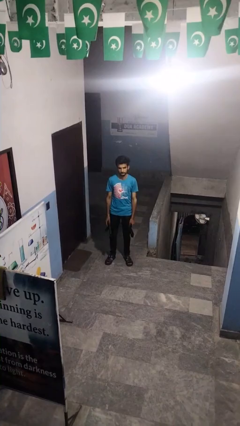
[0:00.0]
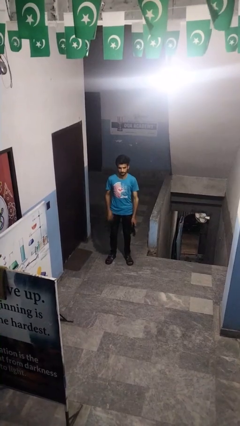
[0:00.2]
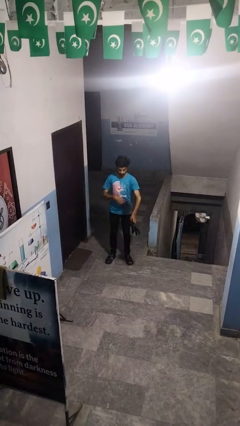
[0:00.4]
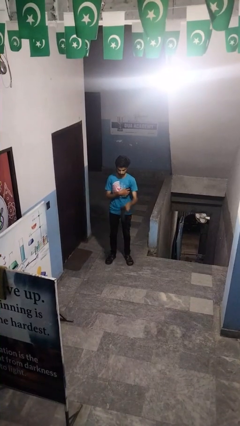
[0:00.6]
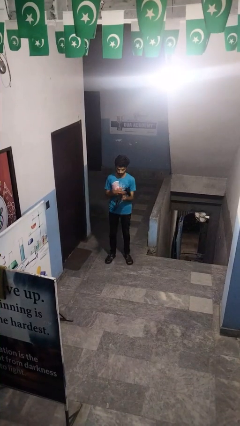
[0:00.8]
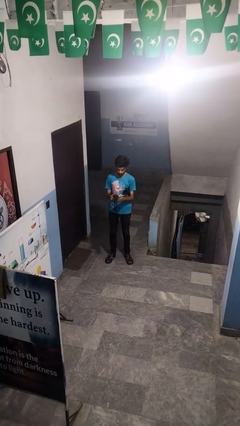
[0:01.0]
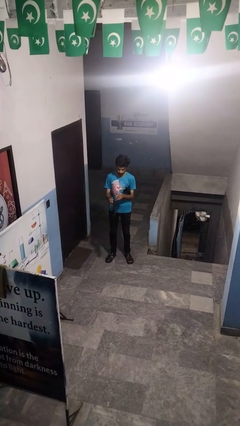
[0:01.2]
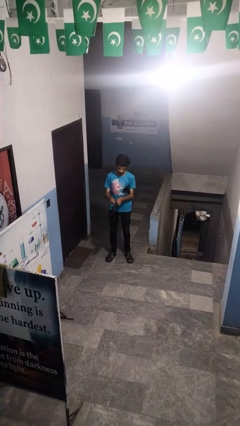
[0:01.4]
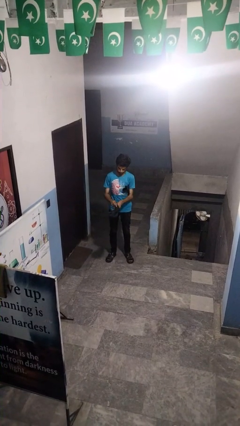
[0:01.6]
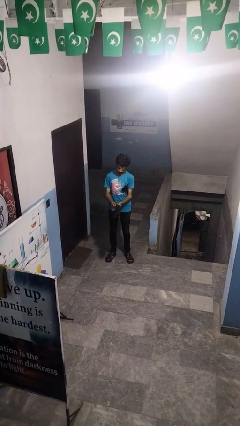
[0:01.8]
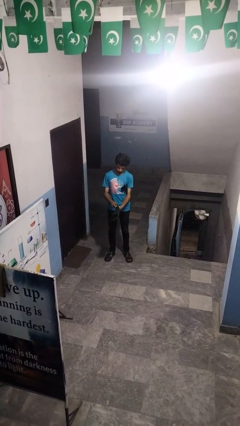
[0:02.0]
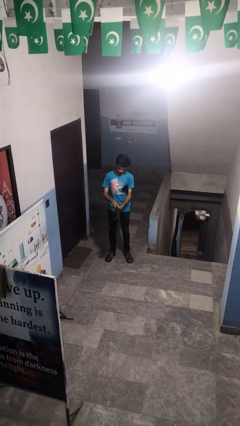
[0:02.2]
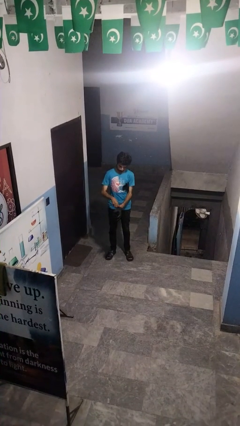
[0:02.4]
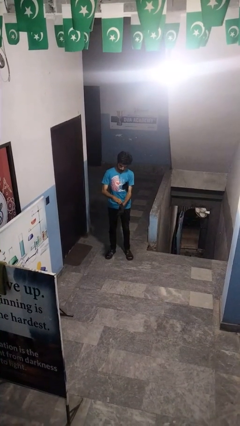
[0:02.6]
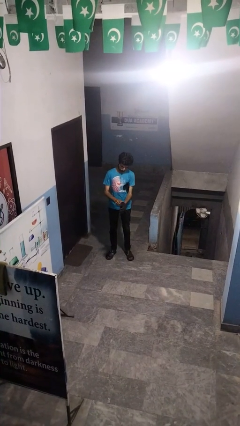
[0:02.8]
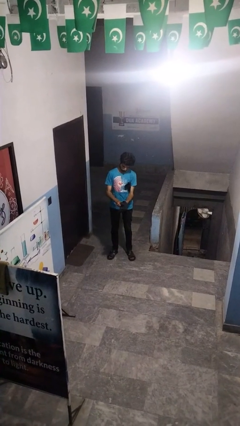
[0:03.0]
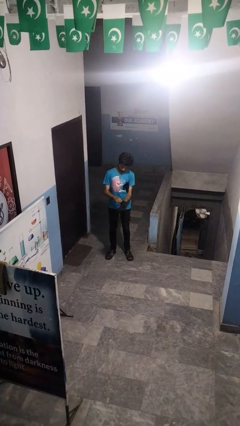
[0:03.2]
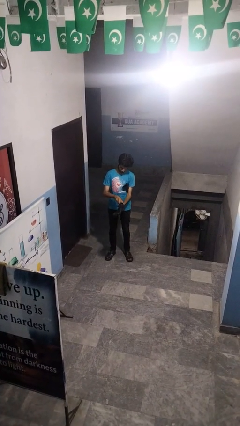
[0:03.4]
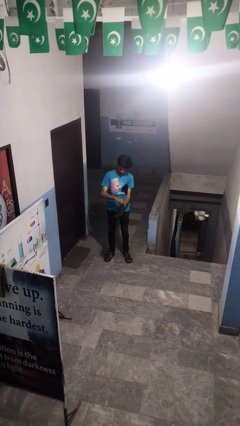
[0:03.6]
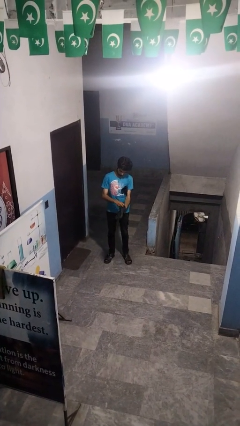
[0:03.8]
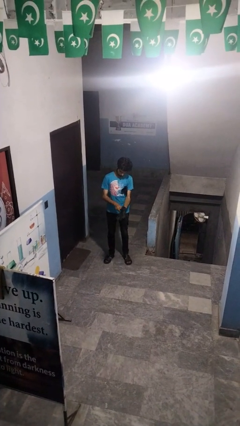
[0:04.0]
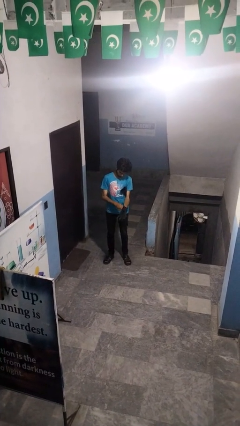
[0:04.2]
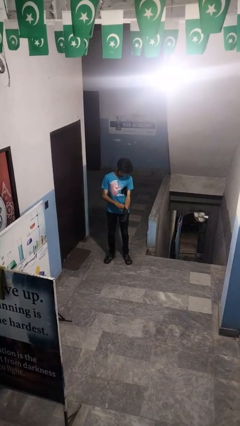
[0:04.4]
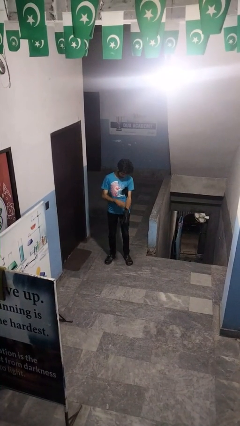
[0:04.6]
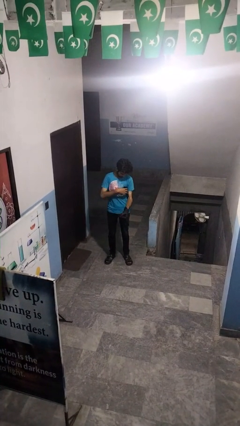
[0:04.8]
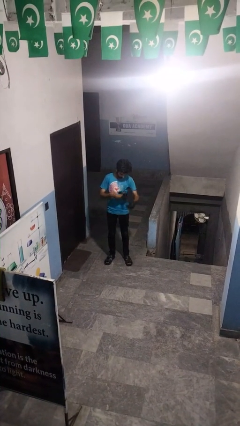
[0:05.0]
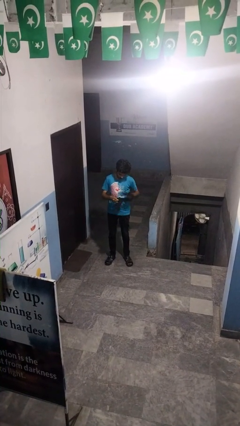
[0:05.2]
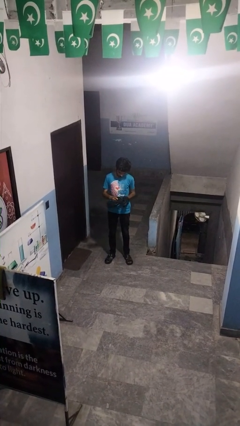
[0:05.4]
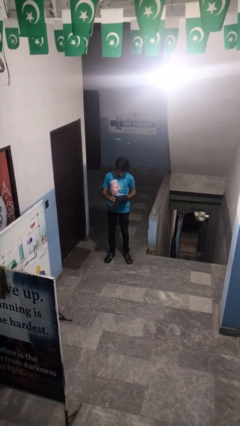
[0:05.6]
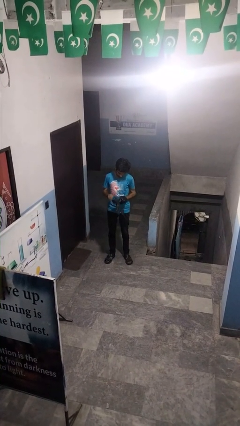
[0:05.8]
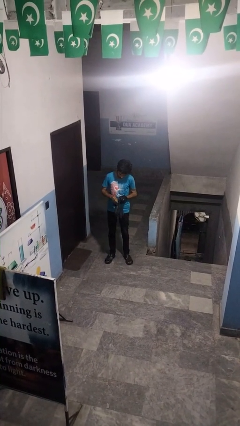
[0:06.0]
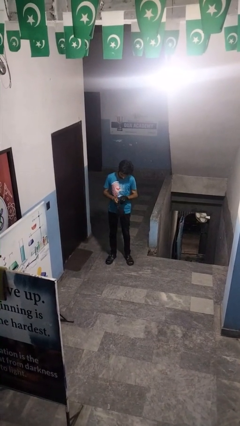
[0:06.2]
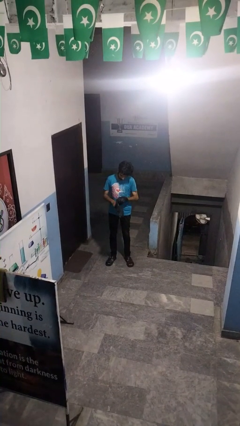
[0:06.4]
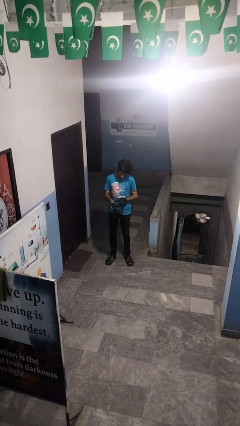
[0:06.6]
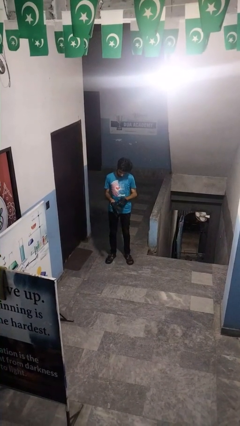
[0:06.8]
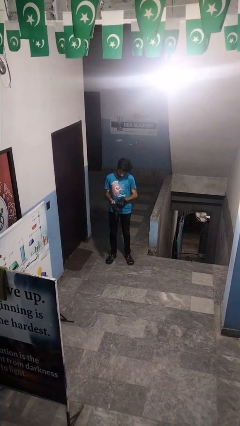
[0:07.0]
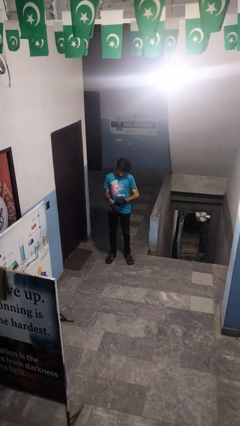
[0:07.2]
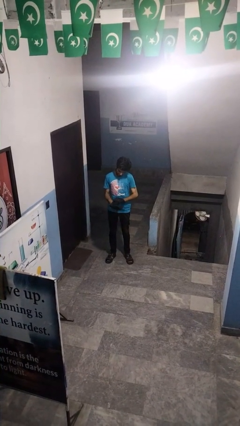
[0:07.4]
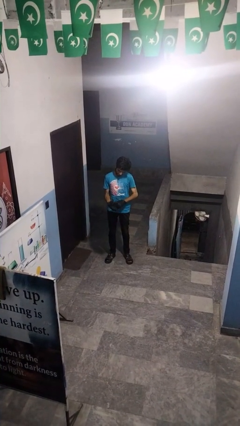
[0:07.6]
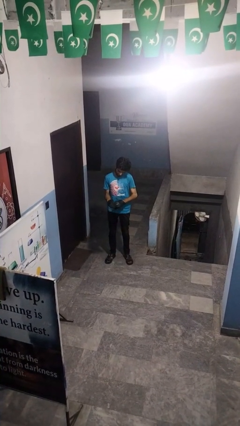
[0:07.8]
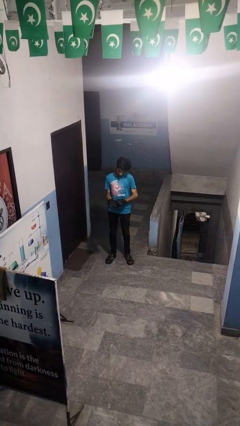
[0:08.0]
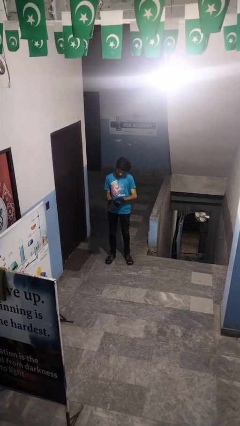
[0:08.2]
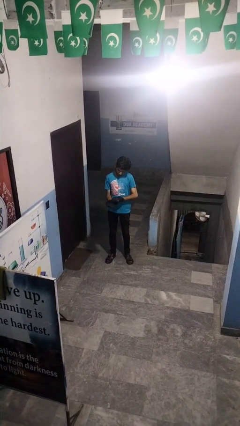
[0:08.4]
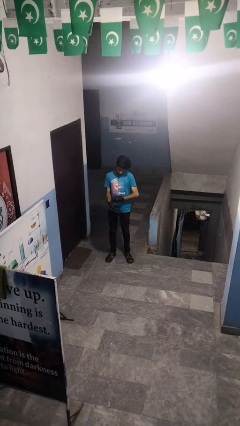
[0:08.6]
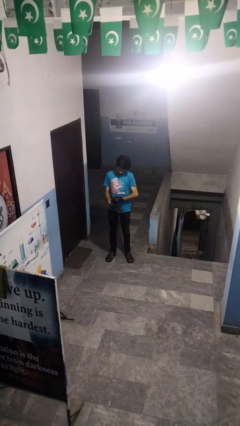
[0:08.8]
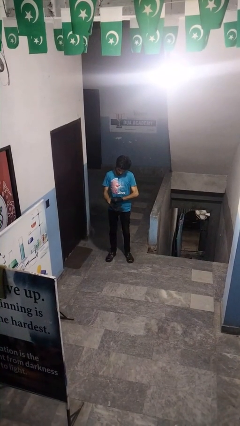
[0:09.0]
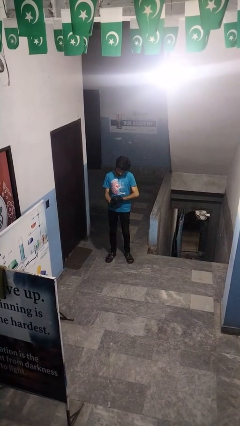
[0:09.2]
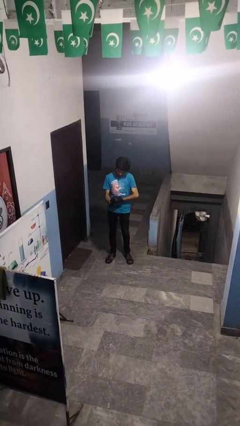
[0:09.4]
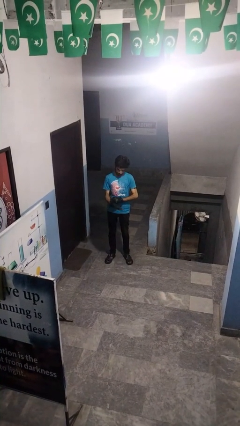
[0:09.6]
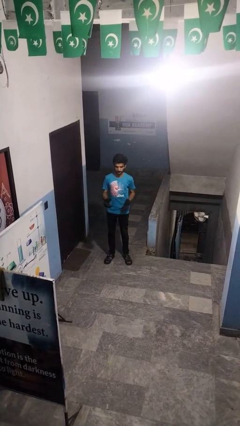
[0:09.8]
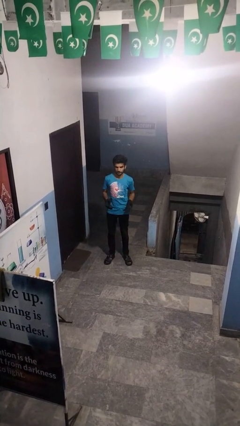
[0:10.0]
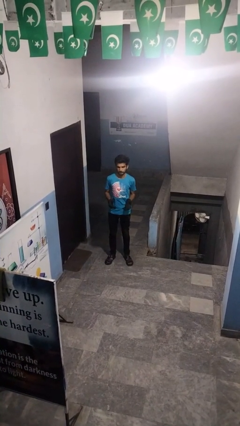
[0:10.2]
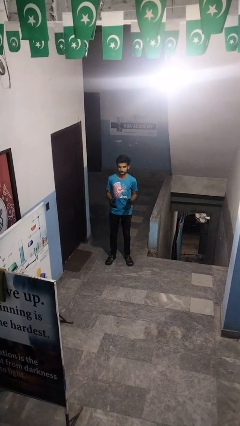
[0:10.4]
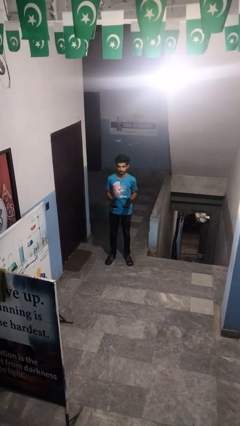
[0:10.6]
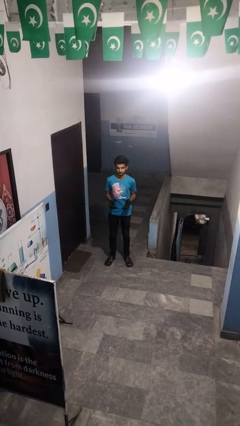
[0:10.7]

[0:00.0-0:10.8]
person puts on gloves

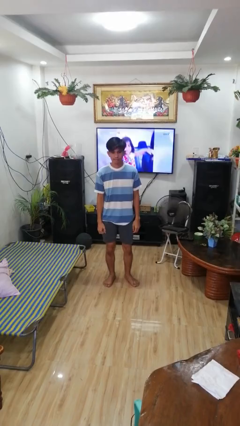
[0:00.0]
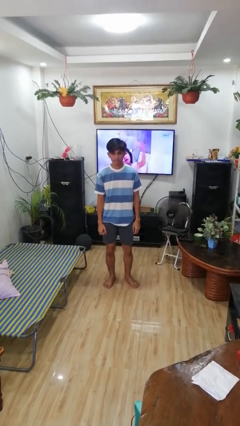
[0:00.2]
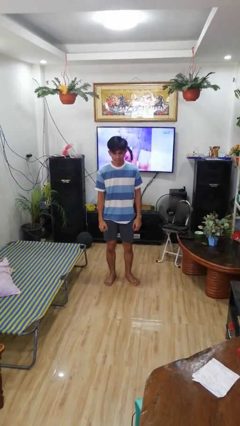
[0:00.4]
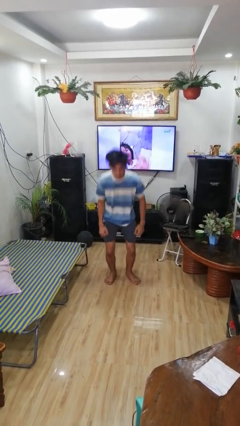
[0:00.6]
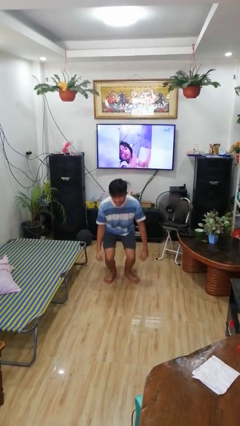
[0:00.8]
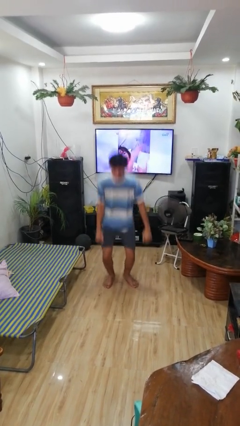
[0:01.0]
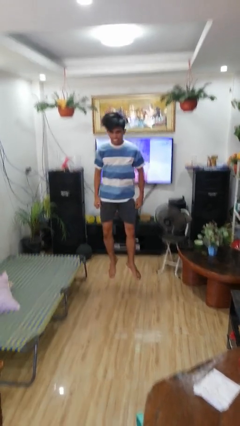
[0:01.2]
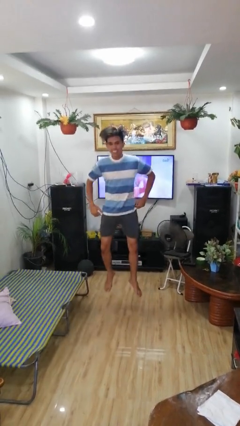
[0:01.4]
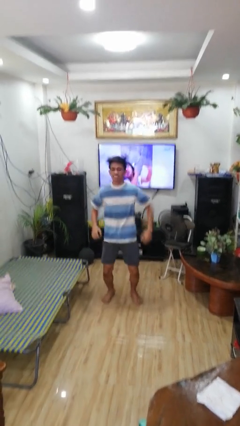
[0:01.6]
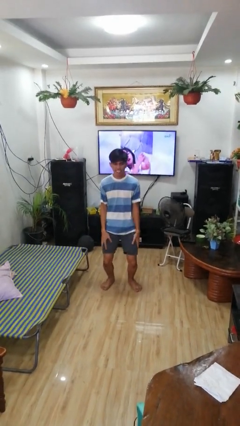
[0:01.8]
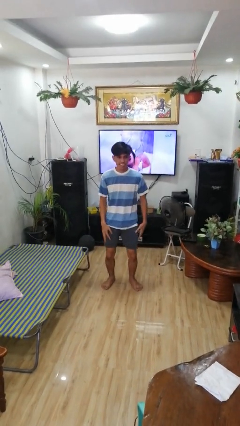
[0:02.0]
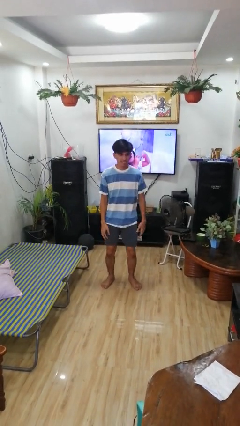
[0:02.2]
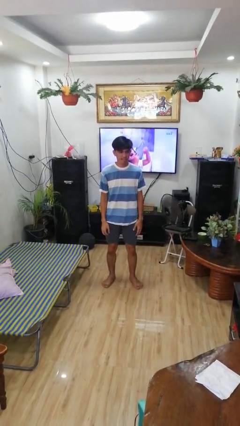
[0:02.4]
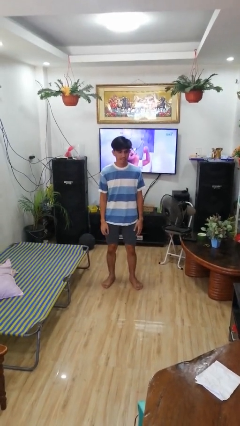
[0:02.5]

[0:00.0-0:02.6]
person jumps

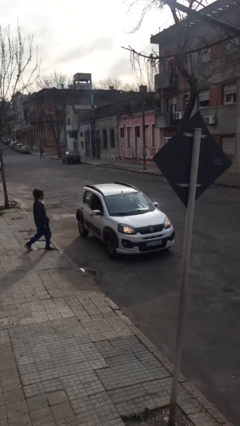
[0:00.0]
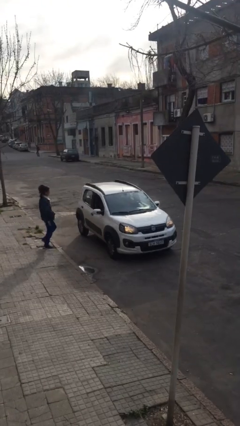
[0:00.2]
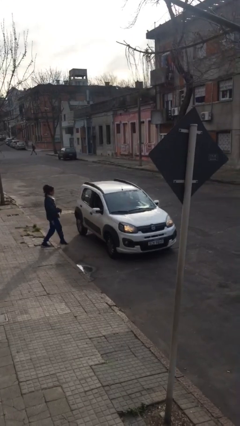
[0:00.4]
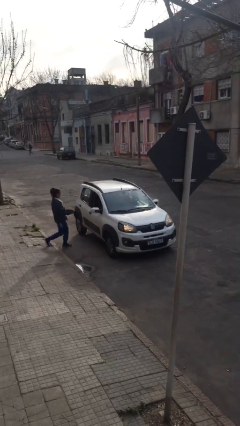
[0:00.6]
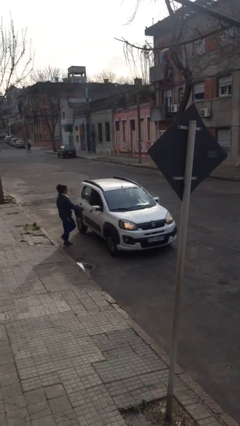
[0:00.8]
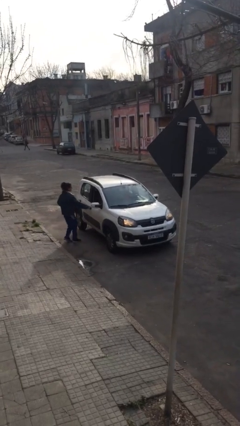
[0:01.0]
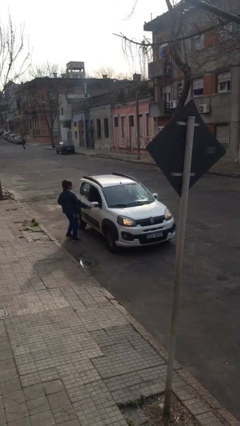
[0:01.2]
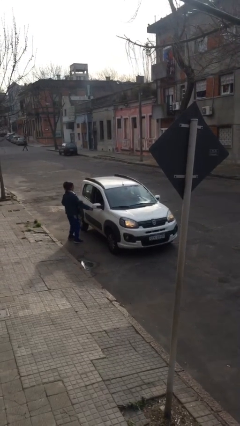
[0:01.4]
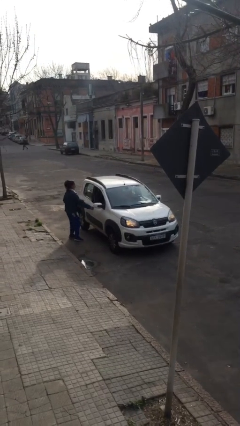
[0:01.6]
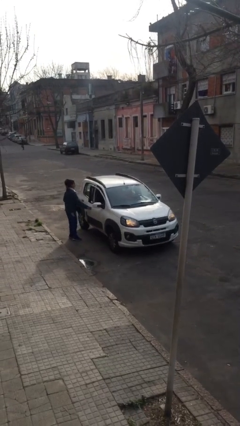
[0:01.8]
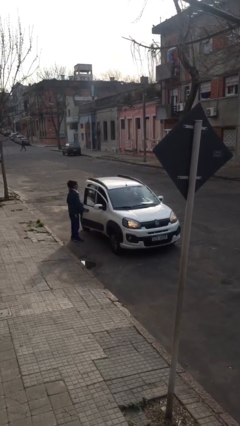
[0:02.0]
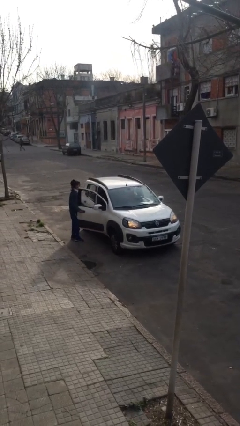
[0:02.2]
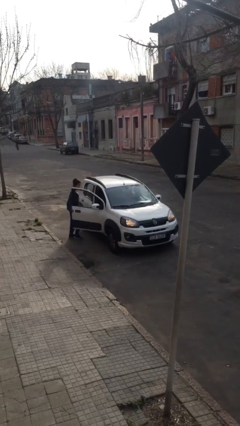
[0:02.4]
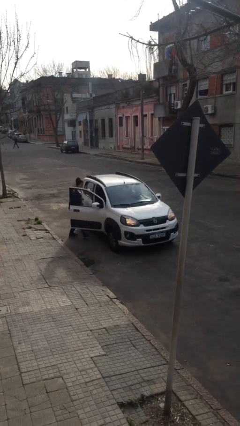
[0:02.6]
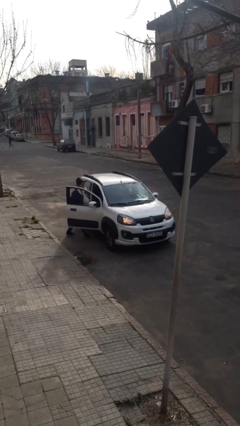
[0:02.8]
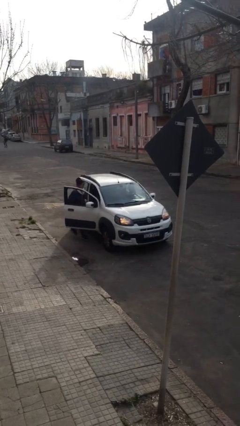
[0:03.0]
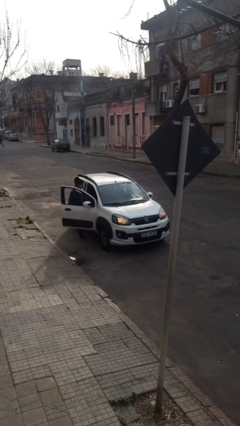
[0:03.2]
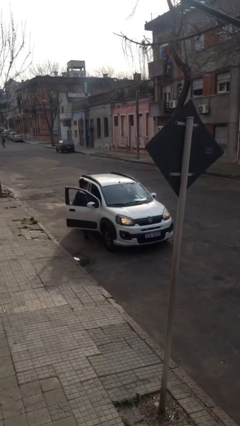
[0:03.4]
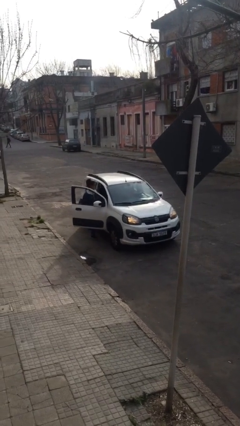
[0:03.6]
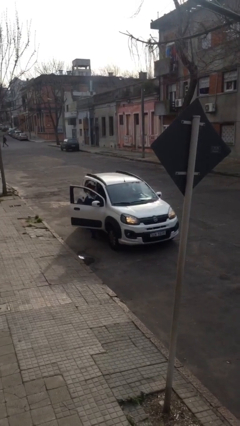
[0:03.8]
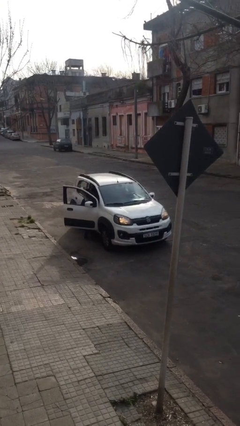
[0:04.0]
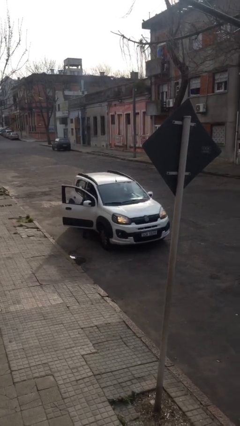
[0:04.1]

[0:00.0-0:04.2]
car picks up person
